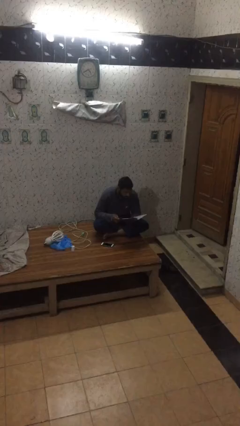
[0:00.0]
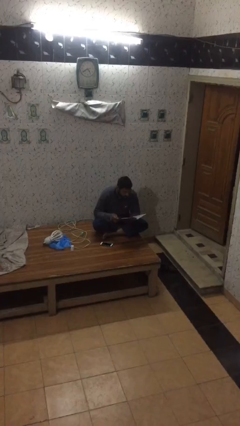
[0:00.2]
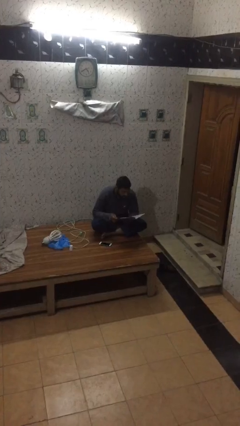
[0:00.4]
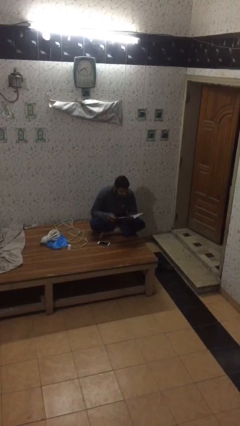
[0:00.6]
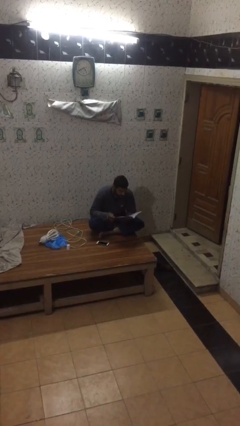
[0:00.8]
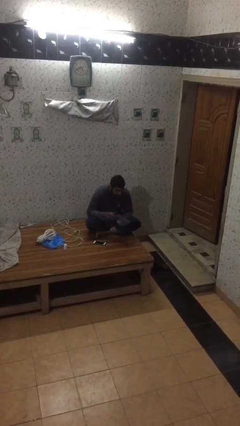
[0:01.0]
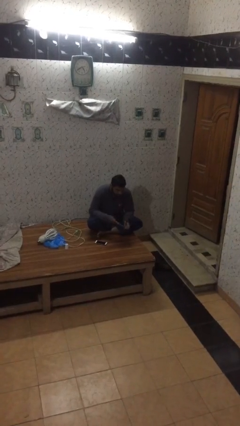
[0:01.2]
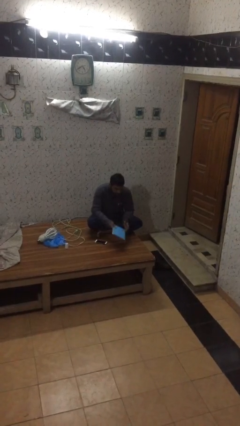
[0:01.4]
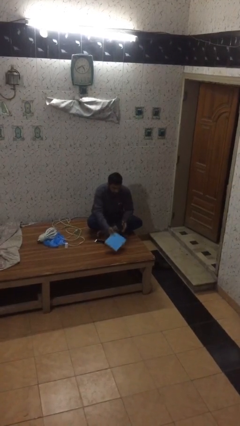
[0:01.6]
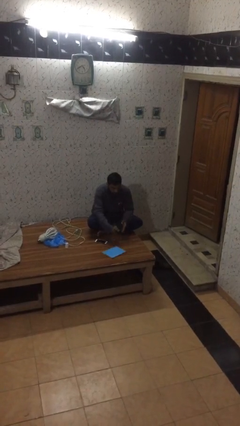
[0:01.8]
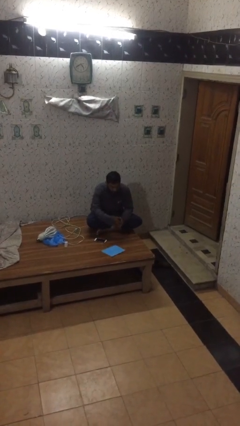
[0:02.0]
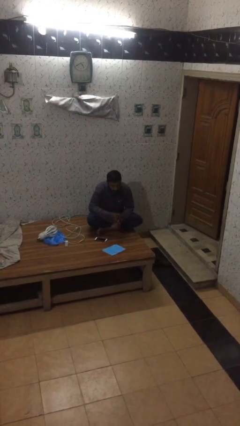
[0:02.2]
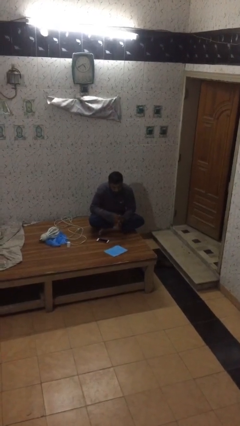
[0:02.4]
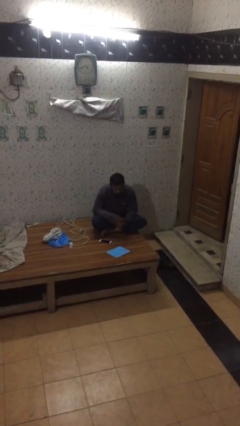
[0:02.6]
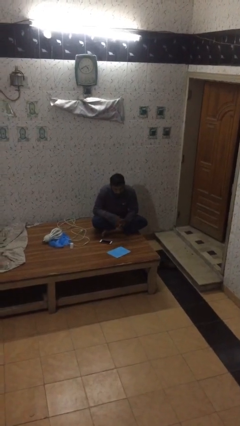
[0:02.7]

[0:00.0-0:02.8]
person puts down object on table

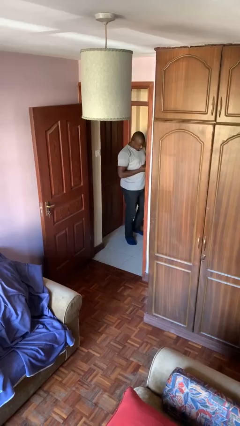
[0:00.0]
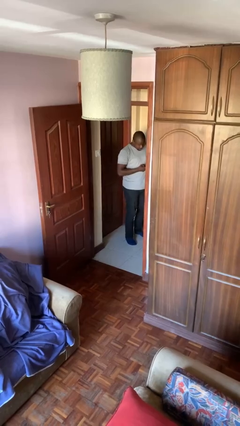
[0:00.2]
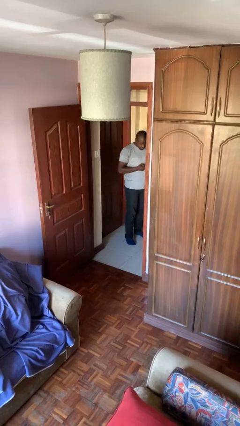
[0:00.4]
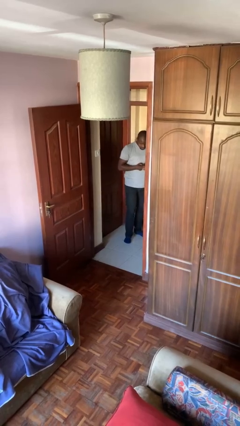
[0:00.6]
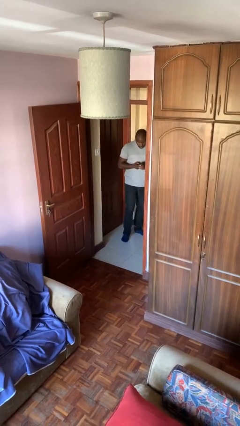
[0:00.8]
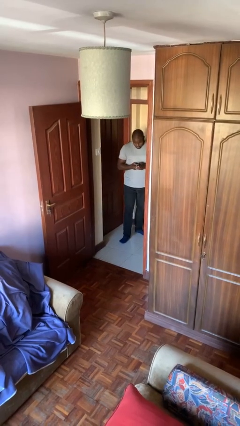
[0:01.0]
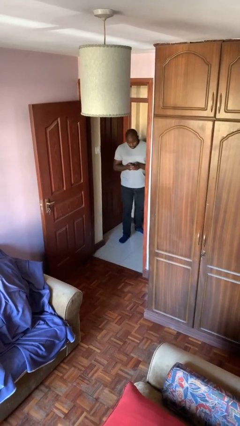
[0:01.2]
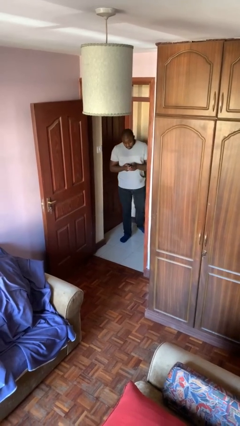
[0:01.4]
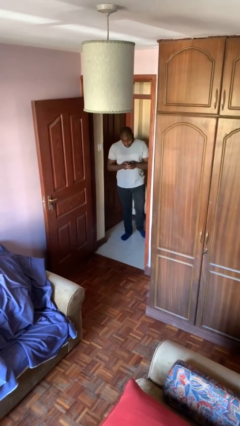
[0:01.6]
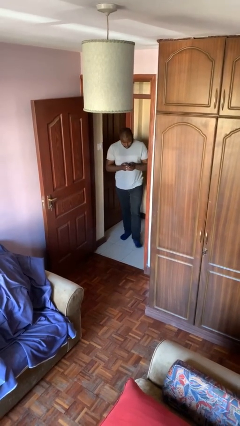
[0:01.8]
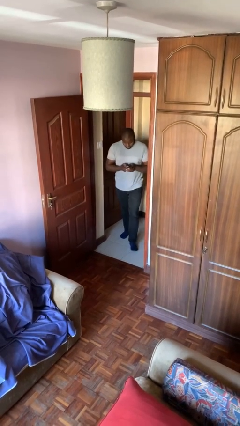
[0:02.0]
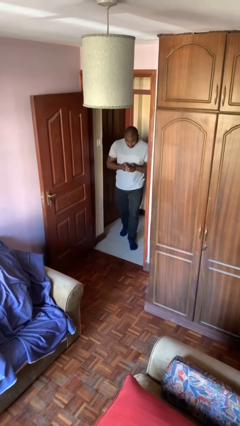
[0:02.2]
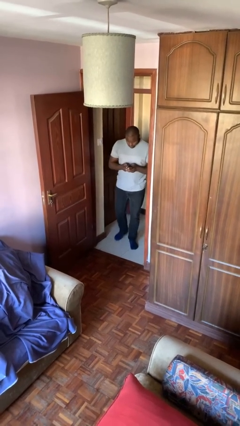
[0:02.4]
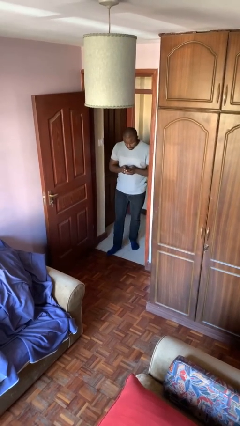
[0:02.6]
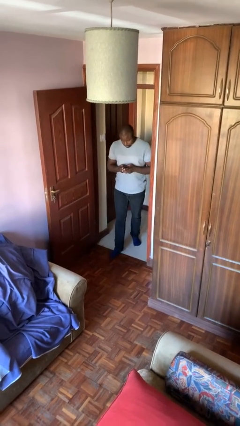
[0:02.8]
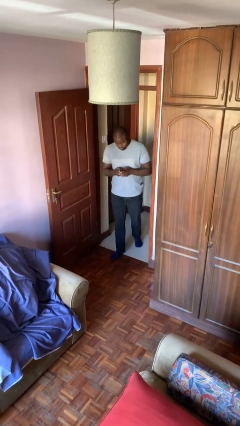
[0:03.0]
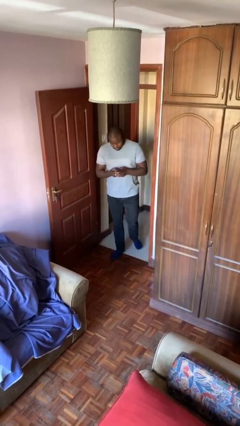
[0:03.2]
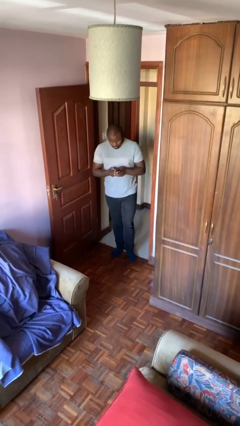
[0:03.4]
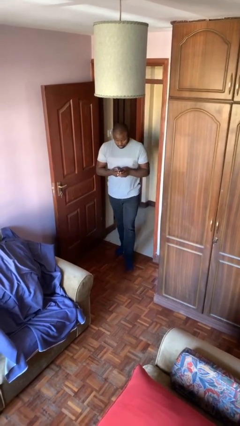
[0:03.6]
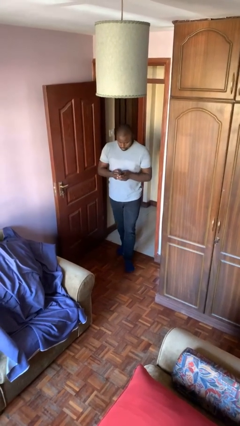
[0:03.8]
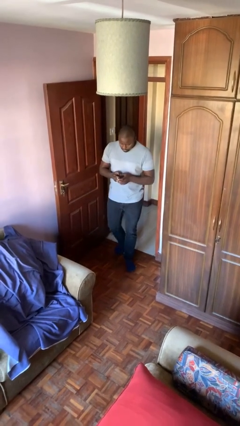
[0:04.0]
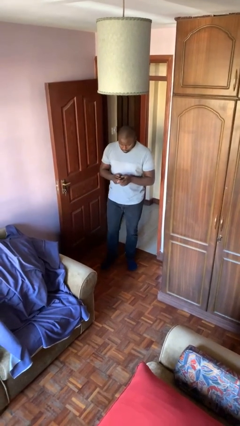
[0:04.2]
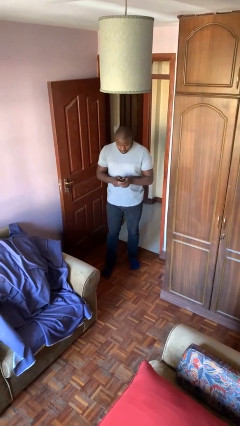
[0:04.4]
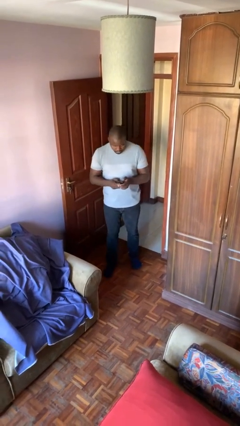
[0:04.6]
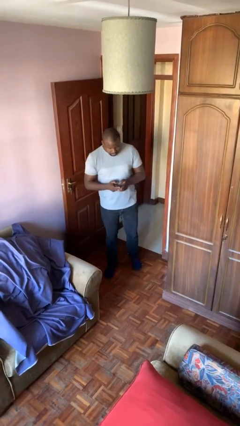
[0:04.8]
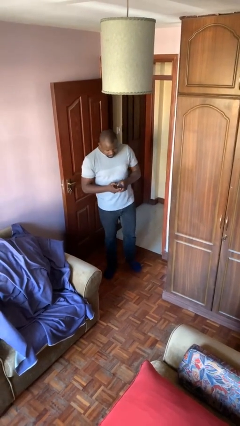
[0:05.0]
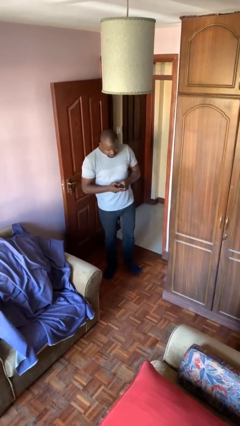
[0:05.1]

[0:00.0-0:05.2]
person enters scene through structure

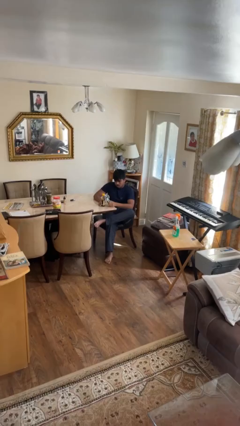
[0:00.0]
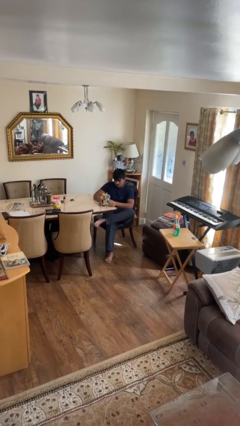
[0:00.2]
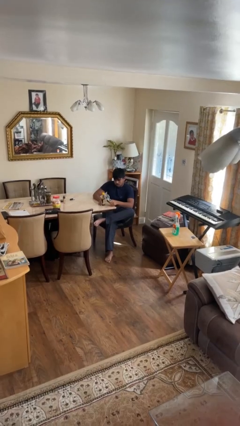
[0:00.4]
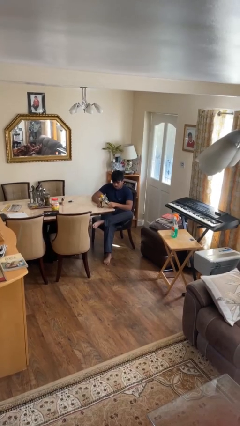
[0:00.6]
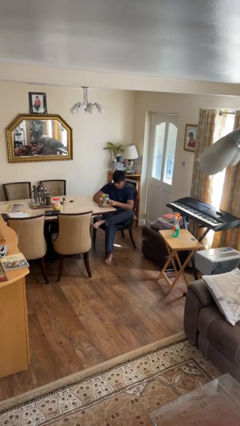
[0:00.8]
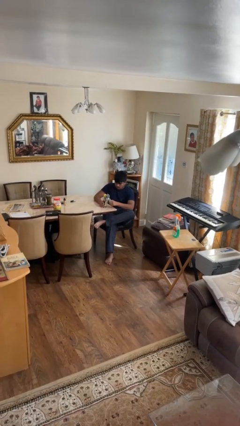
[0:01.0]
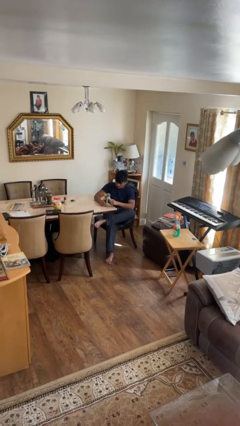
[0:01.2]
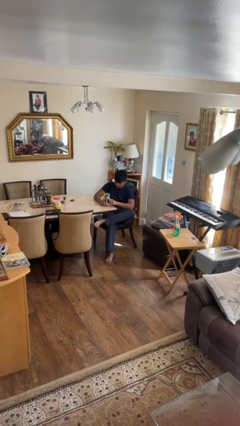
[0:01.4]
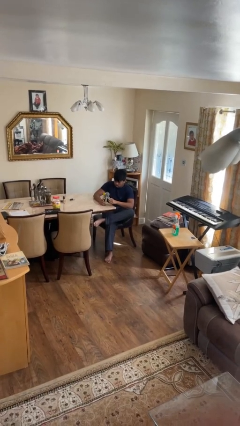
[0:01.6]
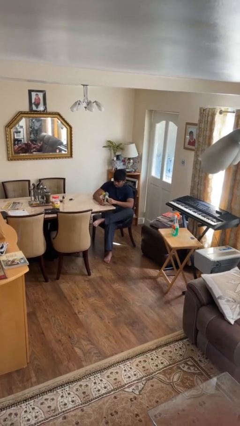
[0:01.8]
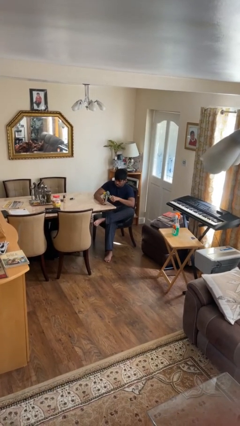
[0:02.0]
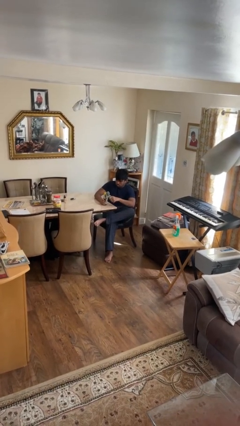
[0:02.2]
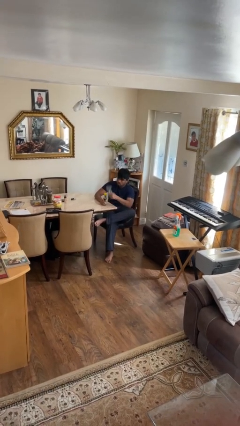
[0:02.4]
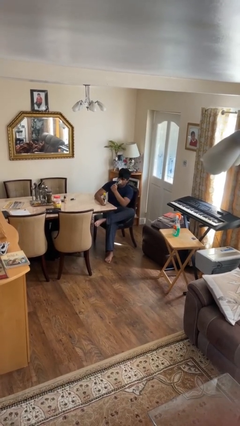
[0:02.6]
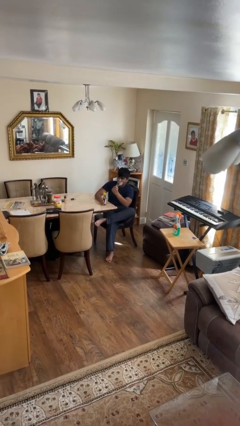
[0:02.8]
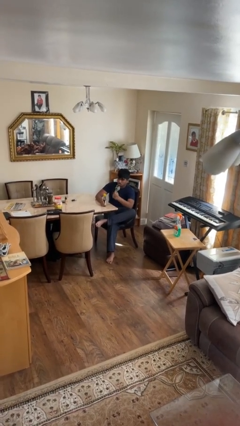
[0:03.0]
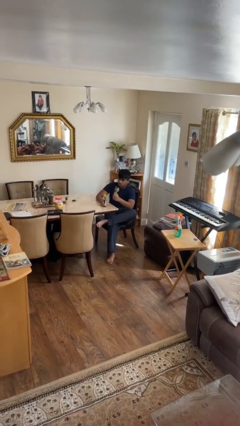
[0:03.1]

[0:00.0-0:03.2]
person opens can with can opener

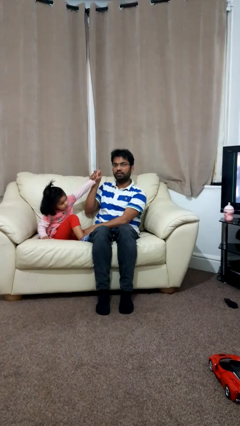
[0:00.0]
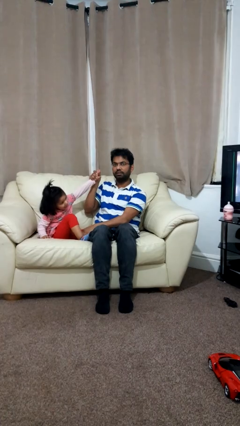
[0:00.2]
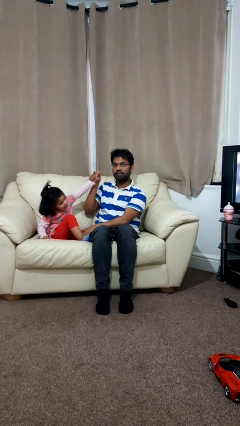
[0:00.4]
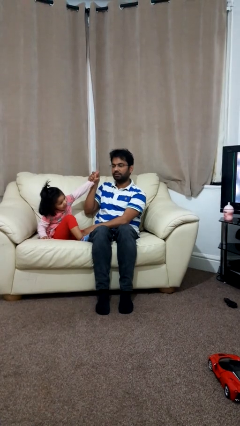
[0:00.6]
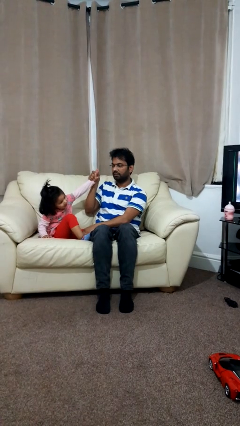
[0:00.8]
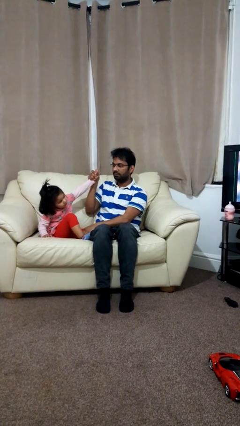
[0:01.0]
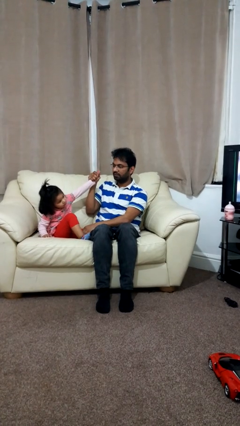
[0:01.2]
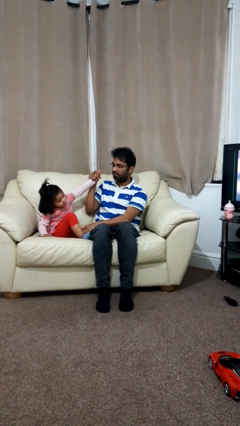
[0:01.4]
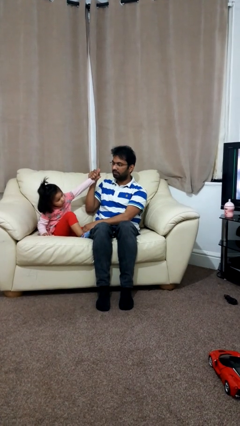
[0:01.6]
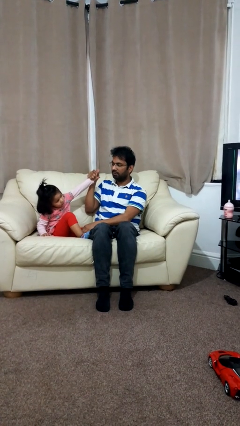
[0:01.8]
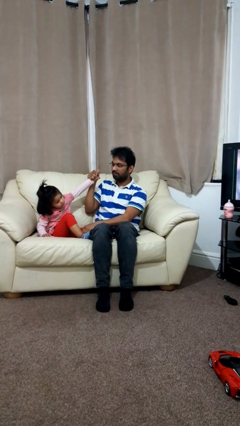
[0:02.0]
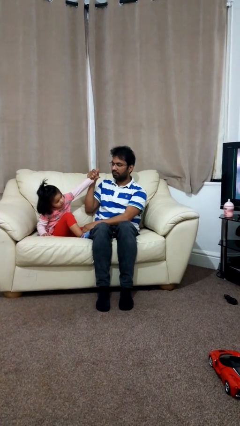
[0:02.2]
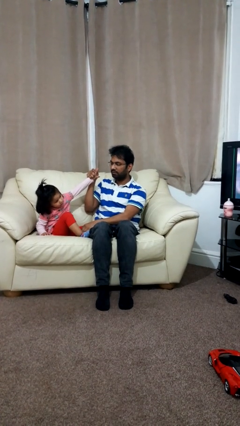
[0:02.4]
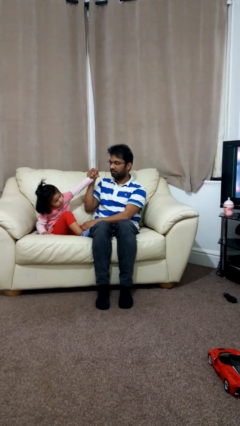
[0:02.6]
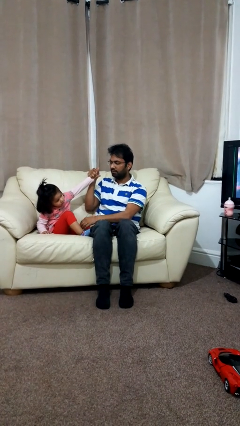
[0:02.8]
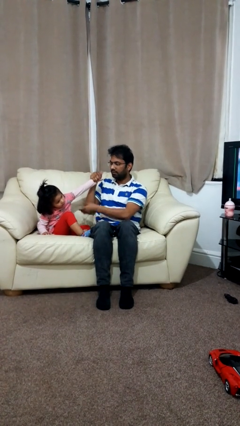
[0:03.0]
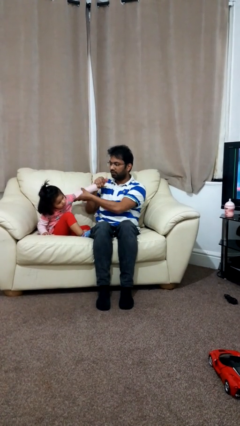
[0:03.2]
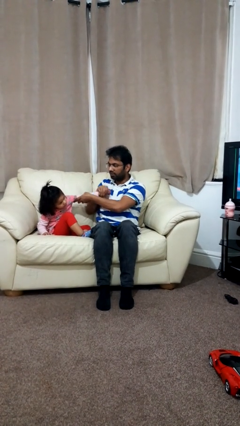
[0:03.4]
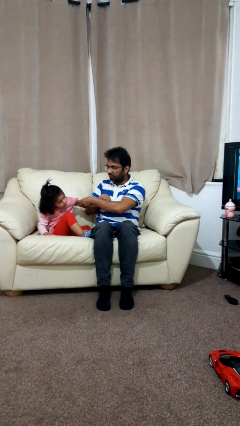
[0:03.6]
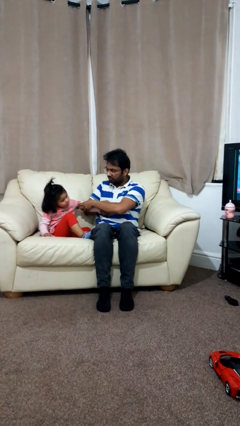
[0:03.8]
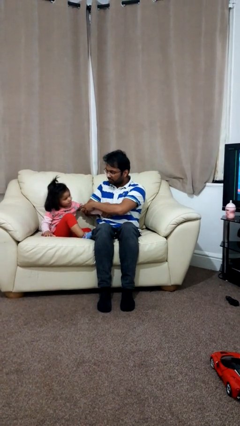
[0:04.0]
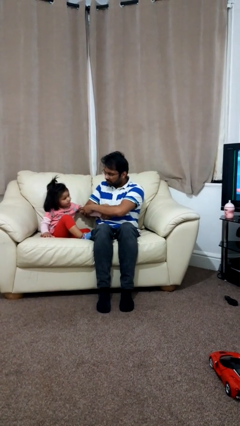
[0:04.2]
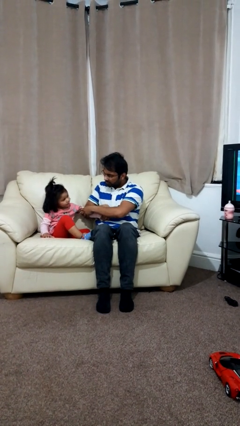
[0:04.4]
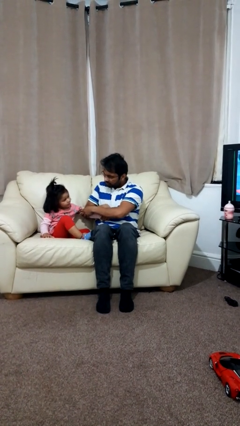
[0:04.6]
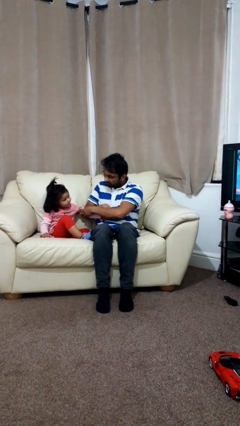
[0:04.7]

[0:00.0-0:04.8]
person highfives hand

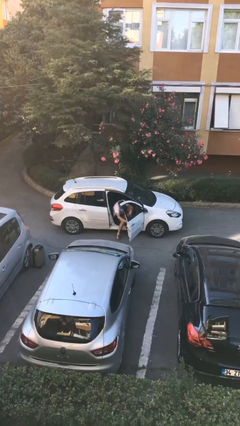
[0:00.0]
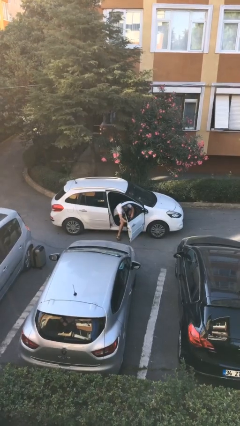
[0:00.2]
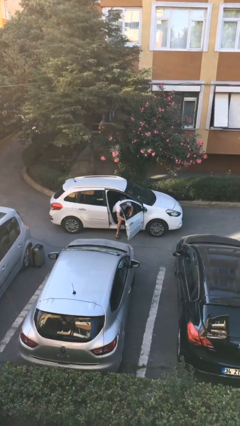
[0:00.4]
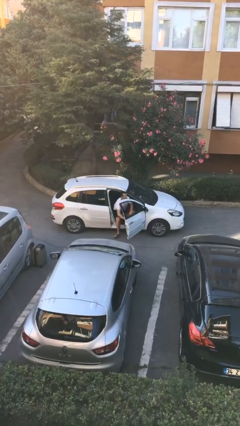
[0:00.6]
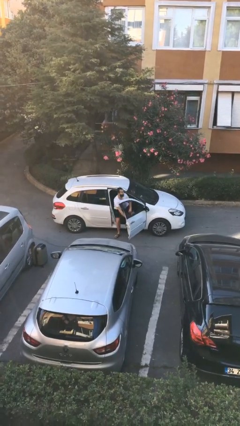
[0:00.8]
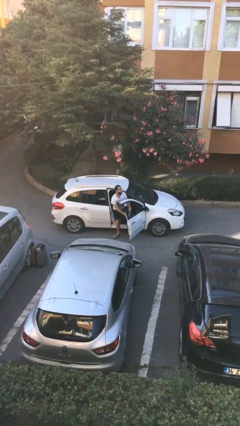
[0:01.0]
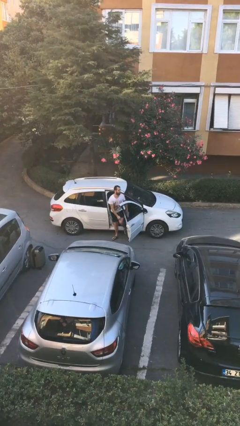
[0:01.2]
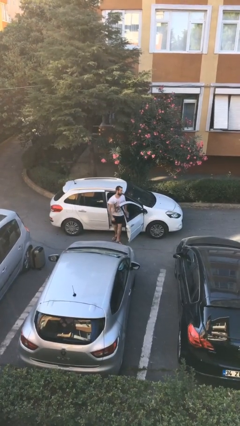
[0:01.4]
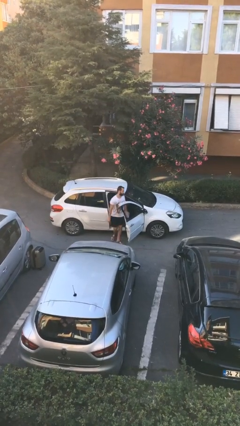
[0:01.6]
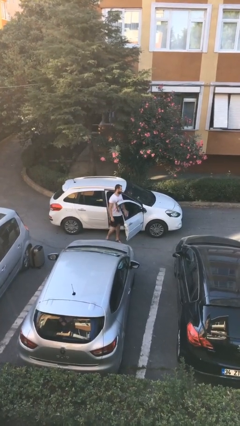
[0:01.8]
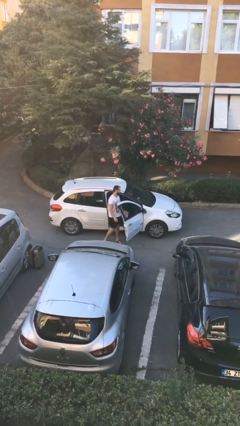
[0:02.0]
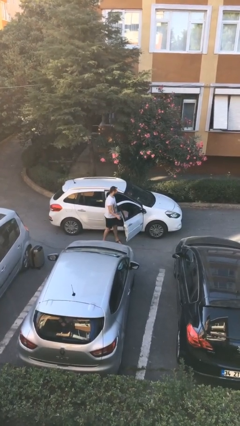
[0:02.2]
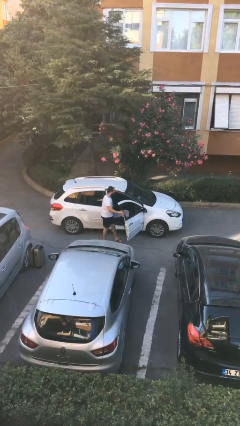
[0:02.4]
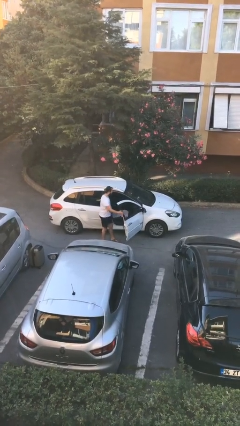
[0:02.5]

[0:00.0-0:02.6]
person exits car
